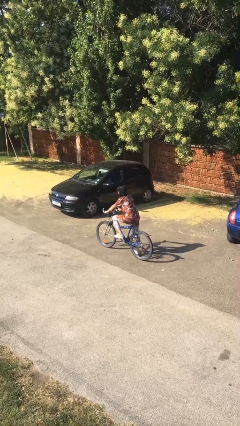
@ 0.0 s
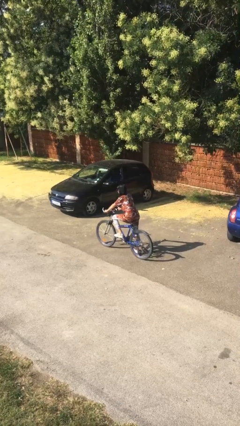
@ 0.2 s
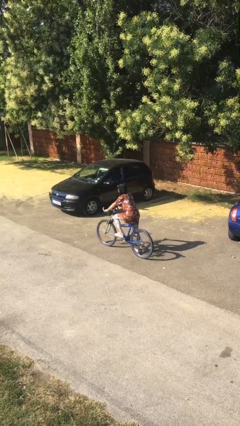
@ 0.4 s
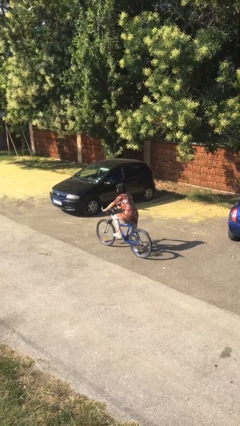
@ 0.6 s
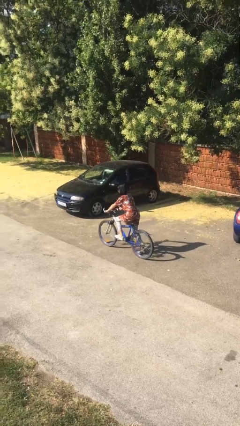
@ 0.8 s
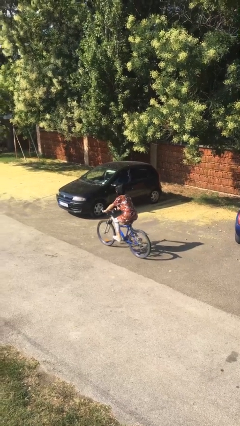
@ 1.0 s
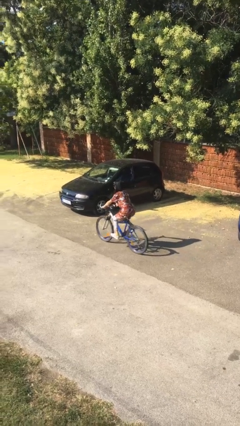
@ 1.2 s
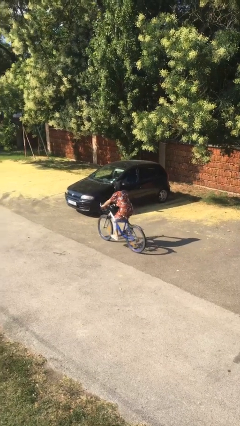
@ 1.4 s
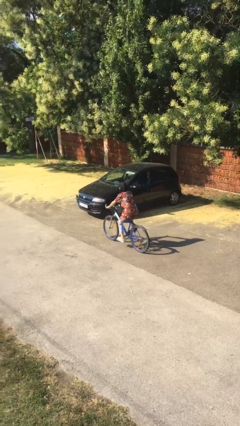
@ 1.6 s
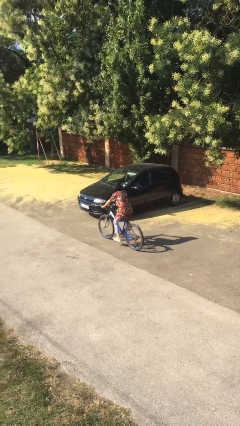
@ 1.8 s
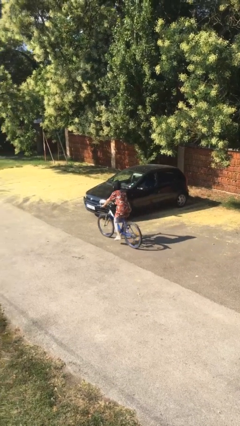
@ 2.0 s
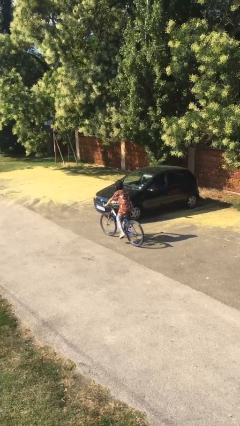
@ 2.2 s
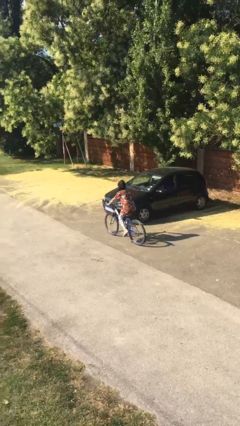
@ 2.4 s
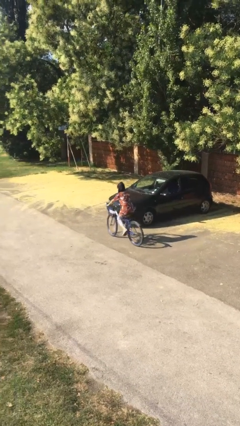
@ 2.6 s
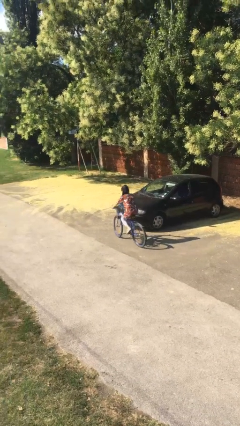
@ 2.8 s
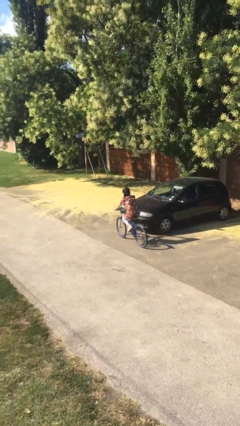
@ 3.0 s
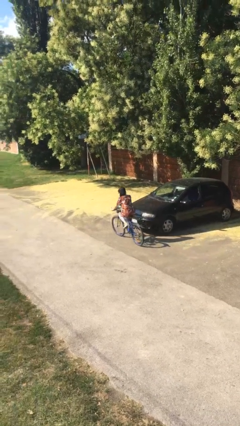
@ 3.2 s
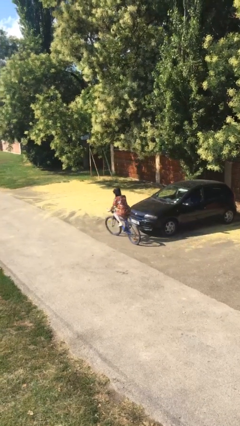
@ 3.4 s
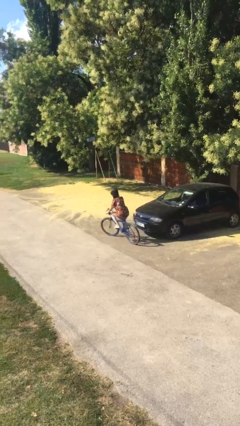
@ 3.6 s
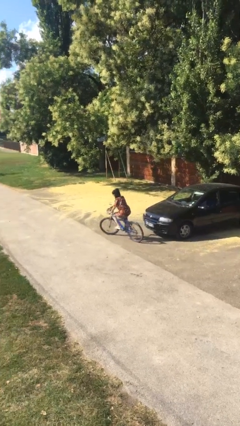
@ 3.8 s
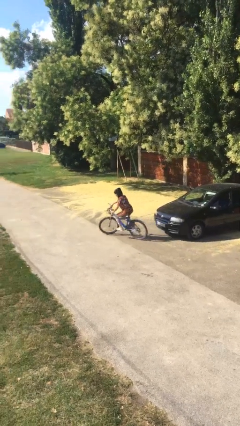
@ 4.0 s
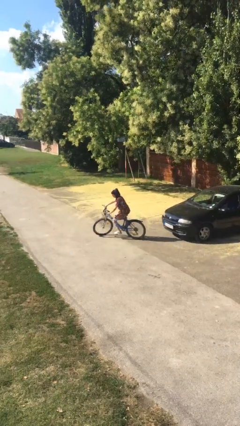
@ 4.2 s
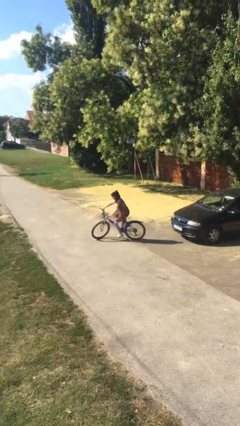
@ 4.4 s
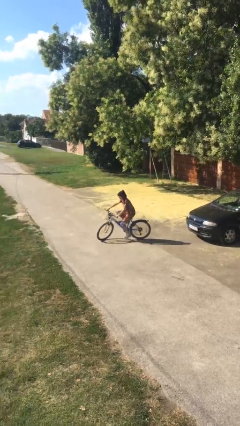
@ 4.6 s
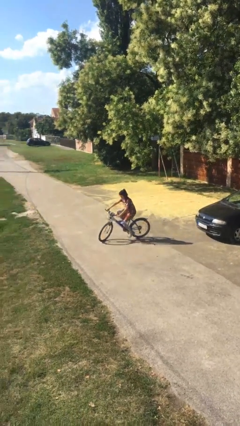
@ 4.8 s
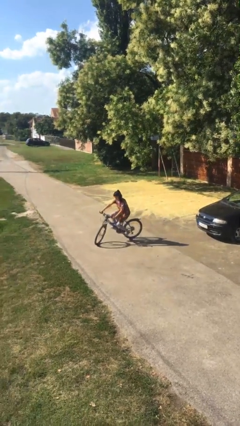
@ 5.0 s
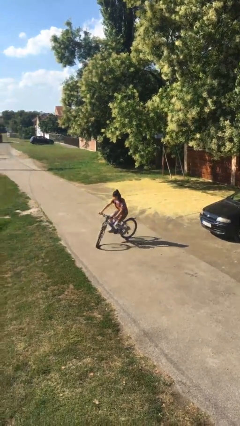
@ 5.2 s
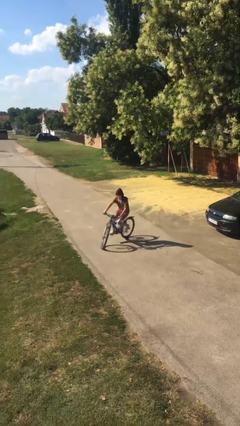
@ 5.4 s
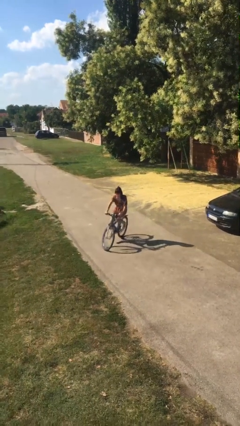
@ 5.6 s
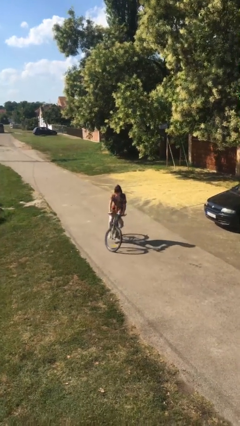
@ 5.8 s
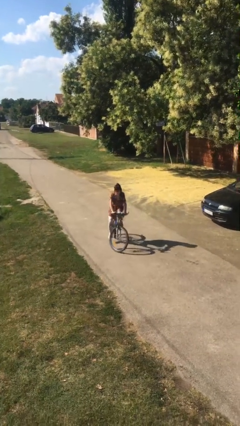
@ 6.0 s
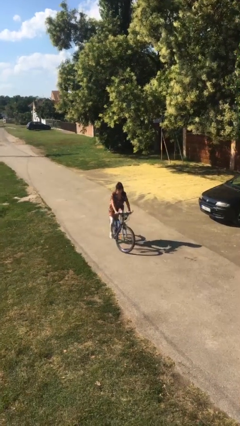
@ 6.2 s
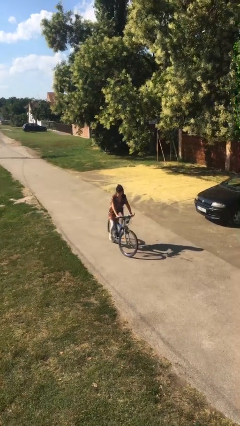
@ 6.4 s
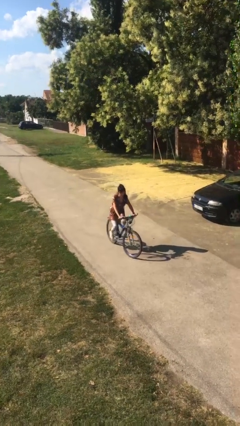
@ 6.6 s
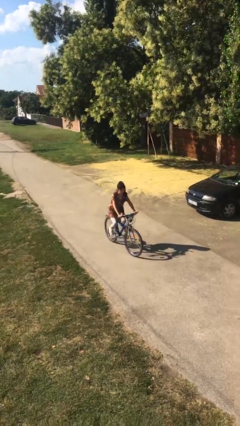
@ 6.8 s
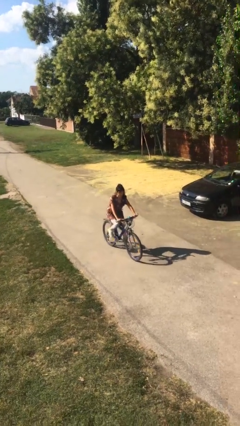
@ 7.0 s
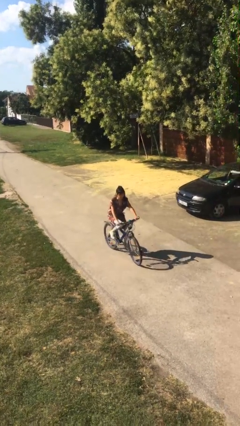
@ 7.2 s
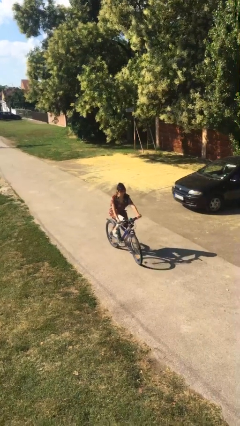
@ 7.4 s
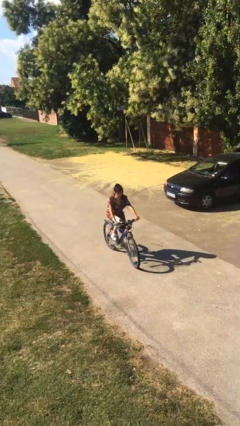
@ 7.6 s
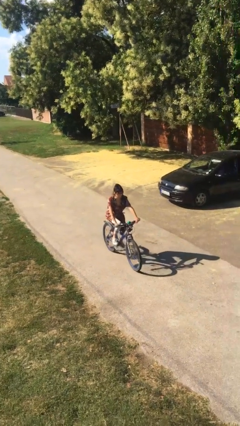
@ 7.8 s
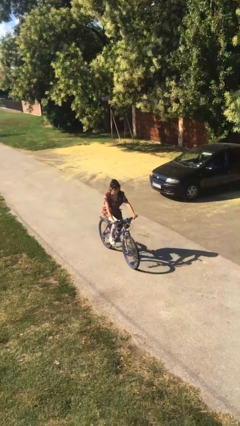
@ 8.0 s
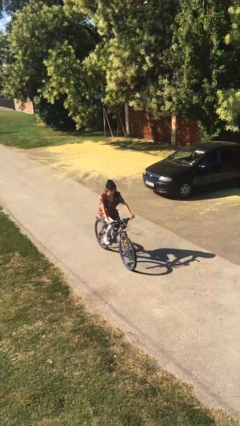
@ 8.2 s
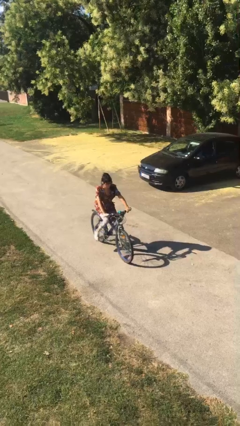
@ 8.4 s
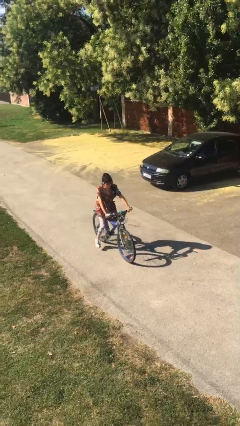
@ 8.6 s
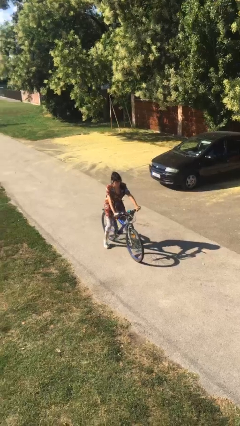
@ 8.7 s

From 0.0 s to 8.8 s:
person rides bicycle

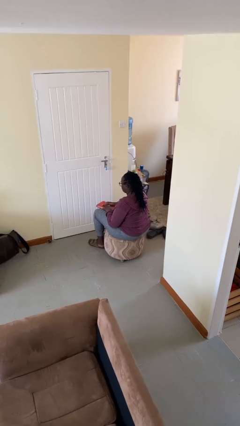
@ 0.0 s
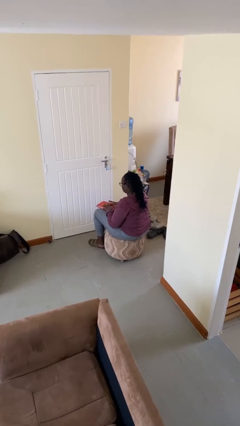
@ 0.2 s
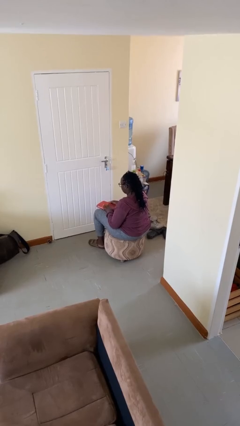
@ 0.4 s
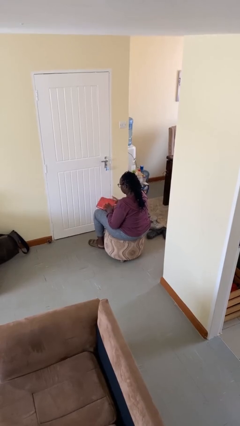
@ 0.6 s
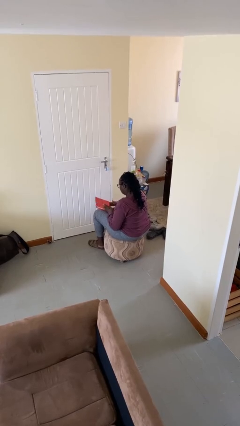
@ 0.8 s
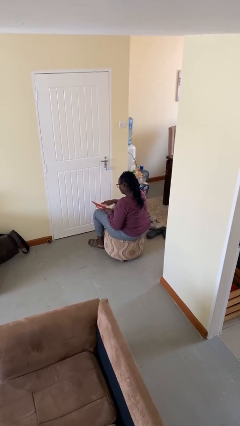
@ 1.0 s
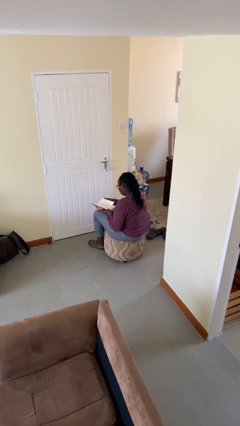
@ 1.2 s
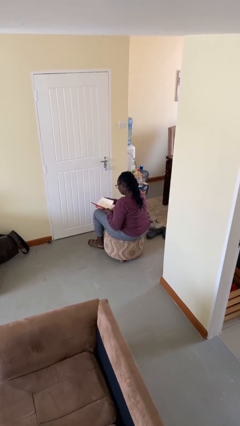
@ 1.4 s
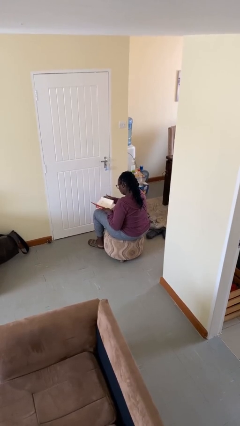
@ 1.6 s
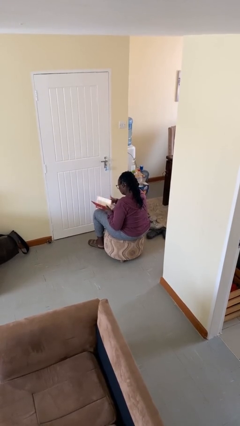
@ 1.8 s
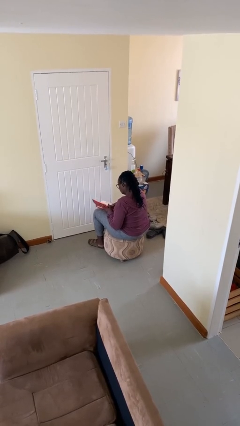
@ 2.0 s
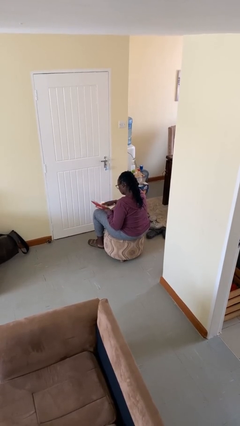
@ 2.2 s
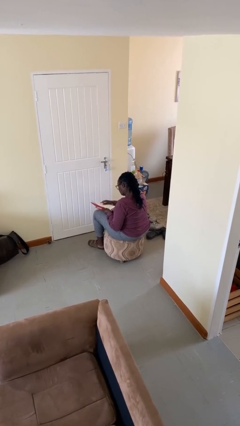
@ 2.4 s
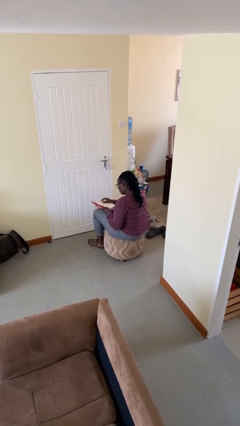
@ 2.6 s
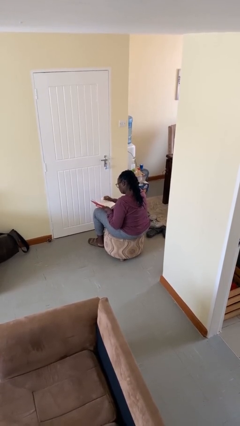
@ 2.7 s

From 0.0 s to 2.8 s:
person reads book

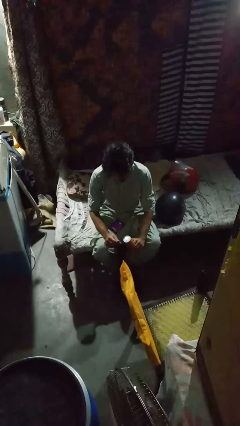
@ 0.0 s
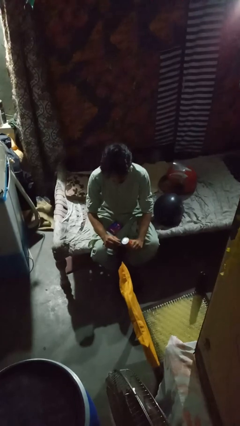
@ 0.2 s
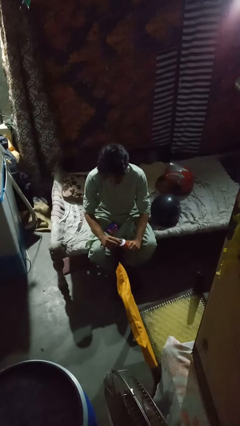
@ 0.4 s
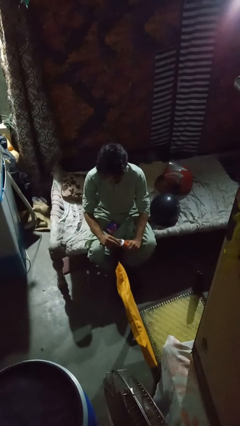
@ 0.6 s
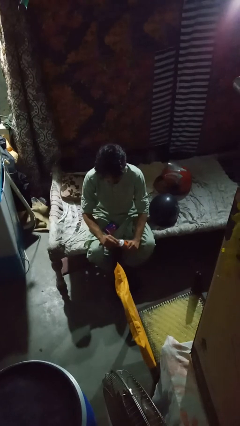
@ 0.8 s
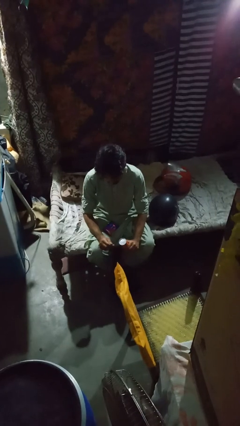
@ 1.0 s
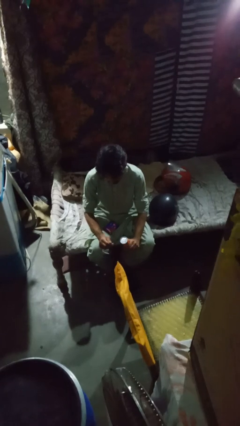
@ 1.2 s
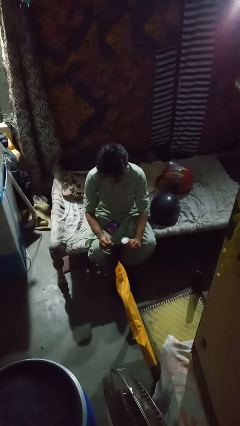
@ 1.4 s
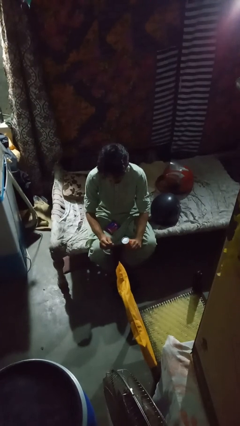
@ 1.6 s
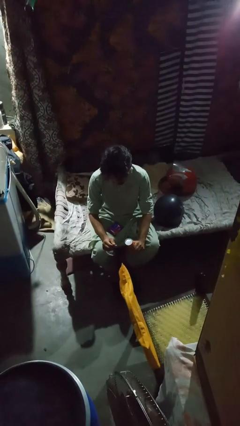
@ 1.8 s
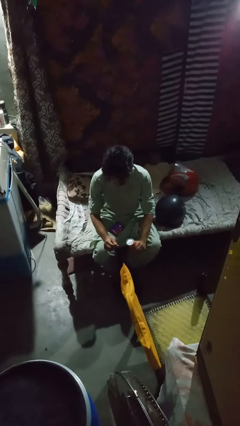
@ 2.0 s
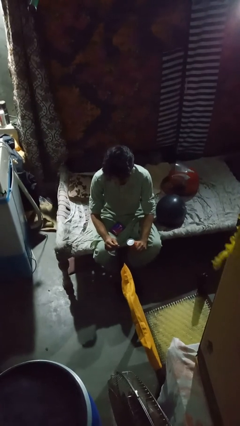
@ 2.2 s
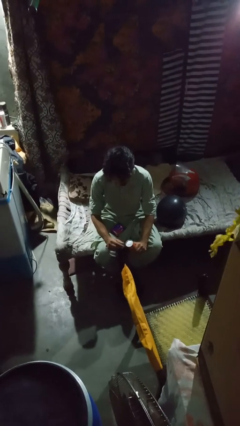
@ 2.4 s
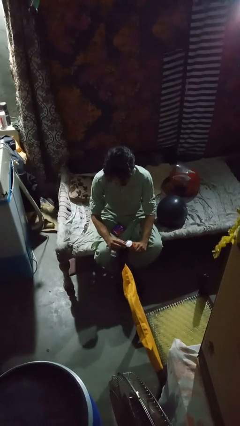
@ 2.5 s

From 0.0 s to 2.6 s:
person opens can with can opener

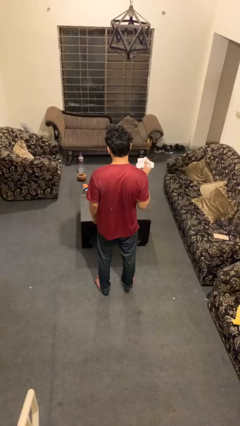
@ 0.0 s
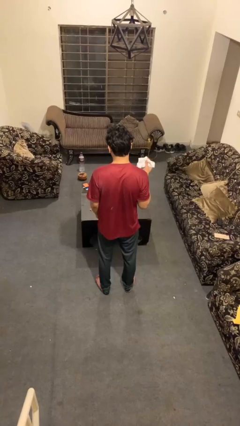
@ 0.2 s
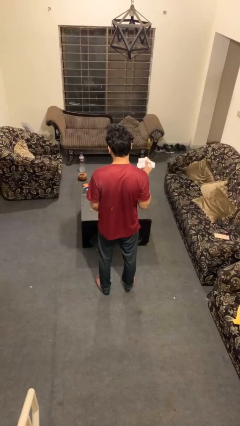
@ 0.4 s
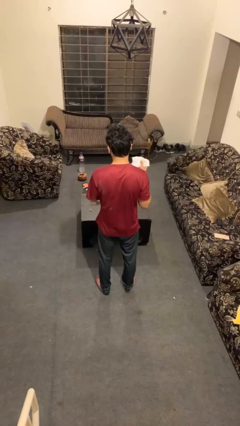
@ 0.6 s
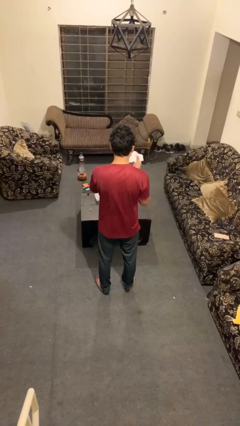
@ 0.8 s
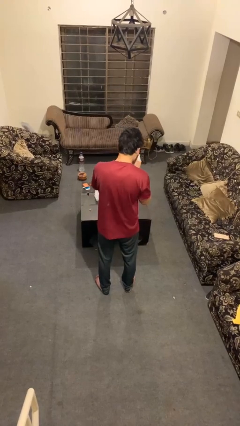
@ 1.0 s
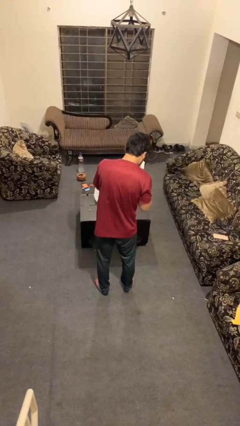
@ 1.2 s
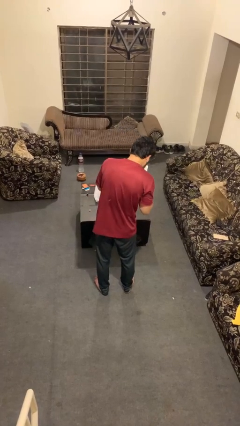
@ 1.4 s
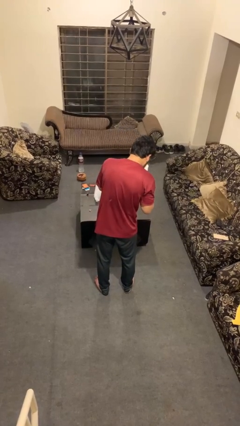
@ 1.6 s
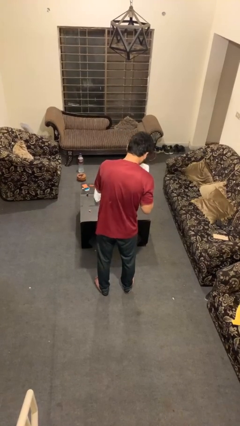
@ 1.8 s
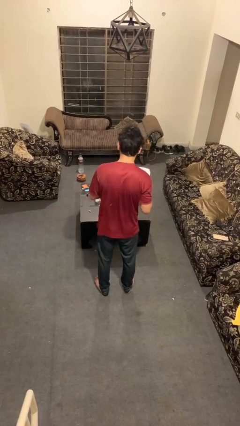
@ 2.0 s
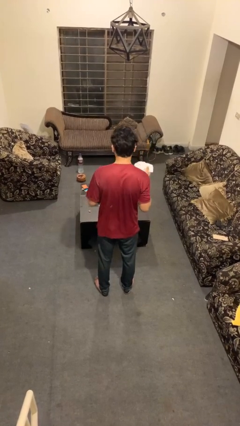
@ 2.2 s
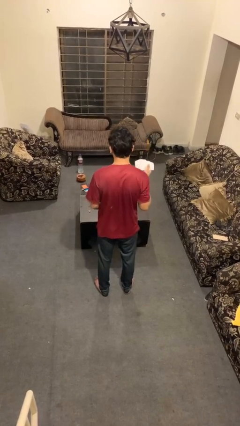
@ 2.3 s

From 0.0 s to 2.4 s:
person blows nose

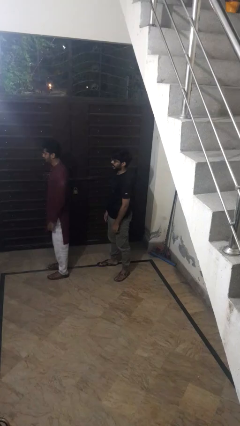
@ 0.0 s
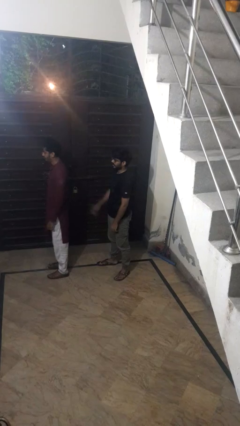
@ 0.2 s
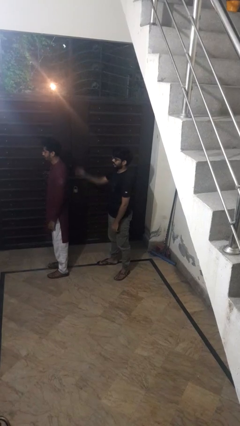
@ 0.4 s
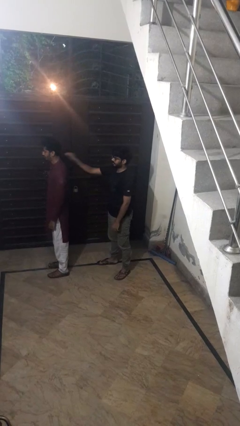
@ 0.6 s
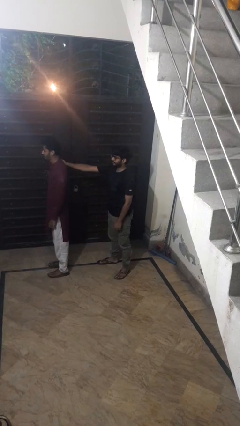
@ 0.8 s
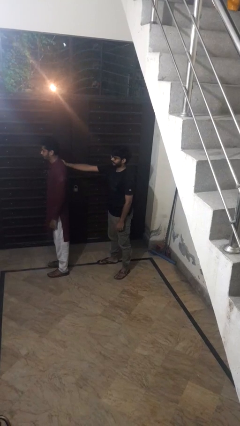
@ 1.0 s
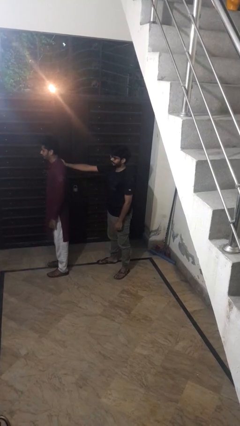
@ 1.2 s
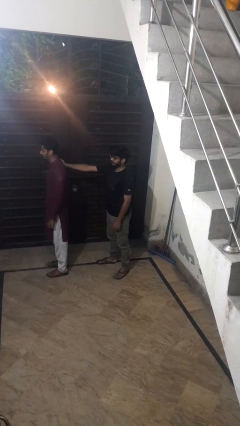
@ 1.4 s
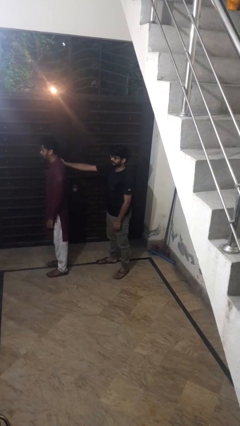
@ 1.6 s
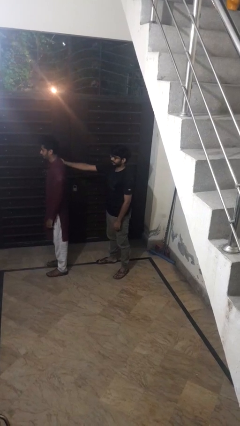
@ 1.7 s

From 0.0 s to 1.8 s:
person grabs person by shoulder
